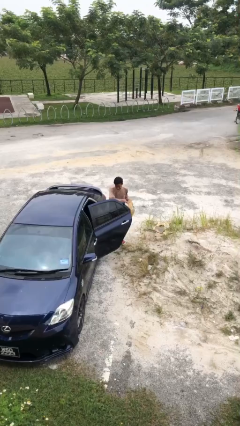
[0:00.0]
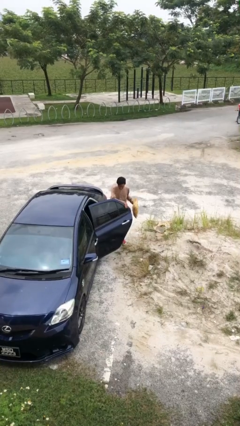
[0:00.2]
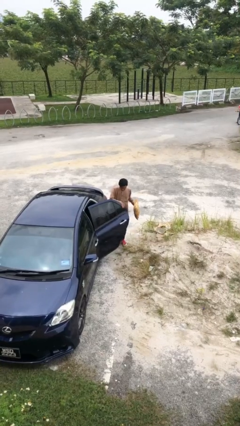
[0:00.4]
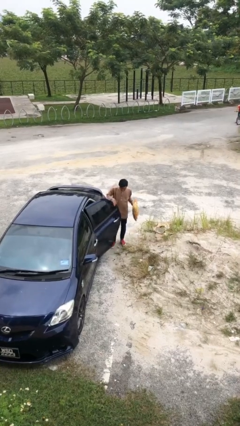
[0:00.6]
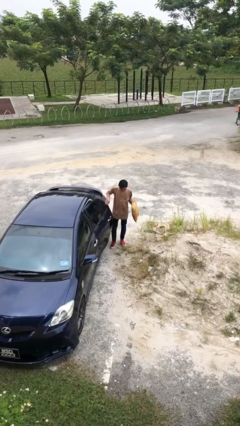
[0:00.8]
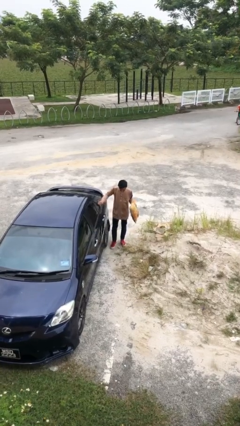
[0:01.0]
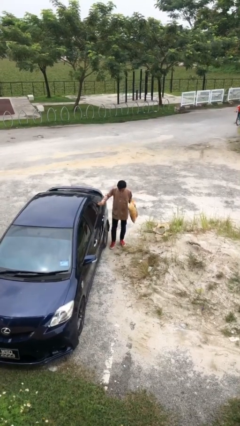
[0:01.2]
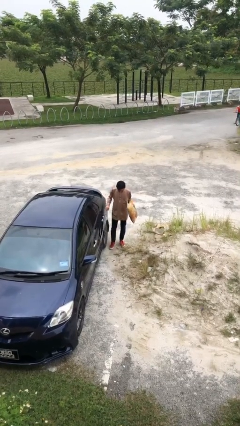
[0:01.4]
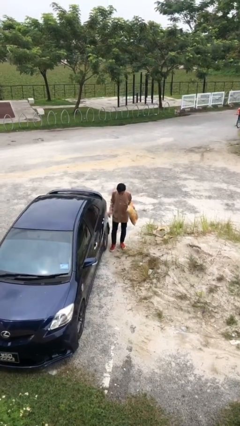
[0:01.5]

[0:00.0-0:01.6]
person closes car door

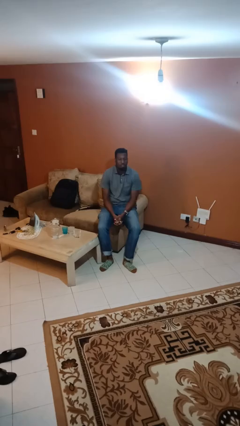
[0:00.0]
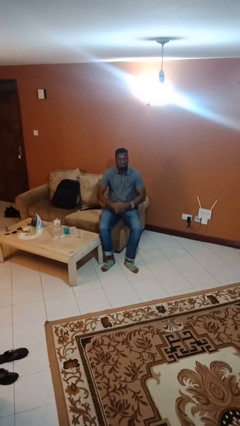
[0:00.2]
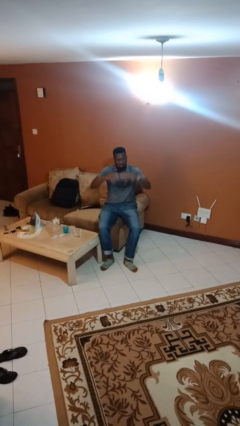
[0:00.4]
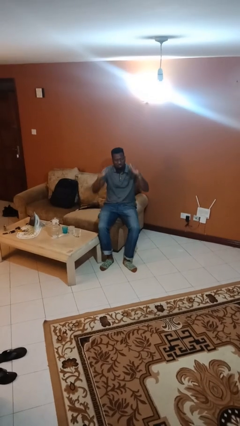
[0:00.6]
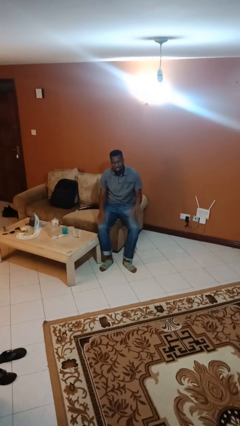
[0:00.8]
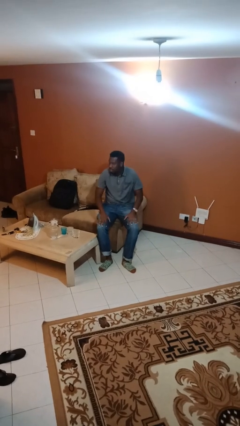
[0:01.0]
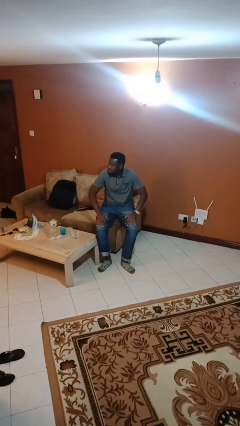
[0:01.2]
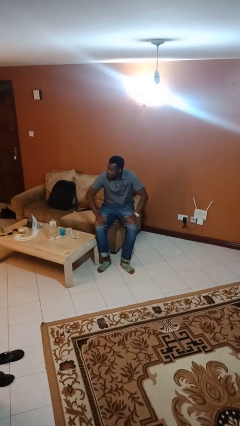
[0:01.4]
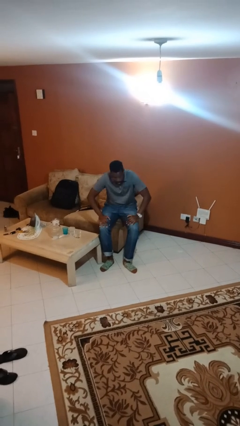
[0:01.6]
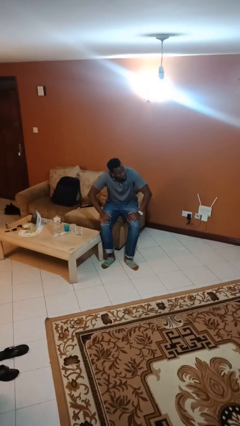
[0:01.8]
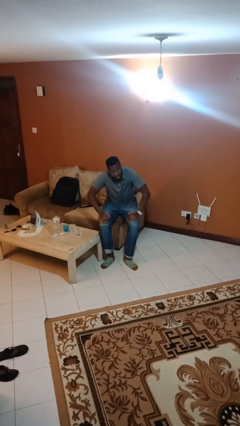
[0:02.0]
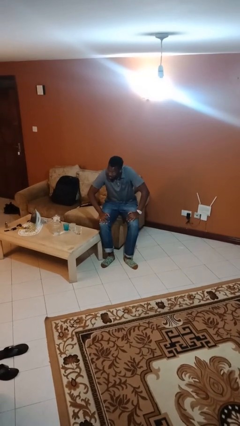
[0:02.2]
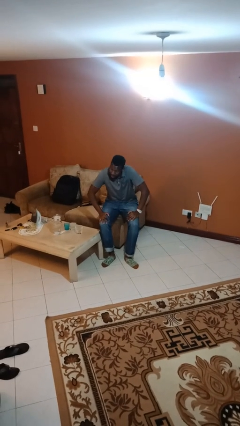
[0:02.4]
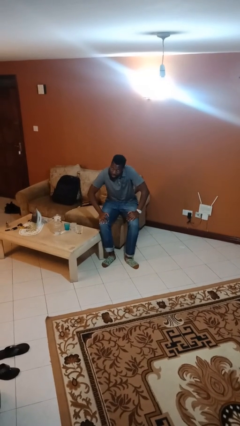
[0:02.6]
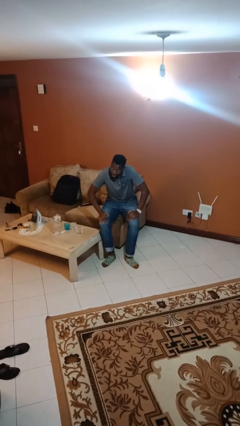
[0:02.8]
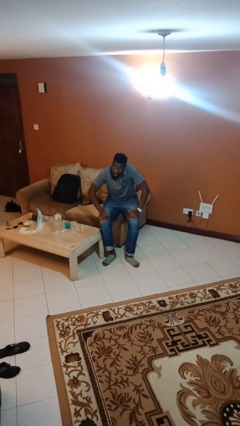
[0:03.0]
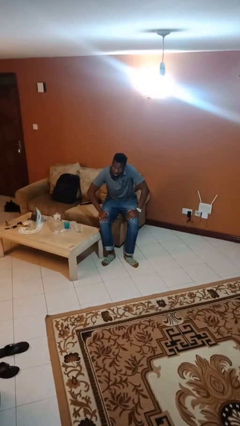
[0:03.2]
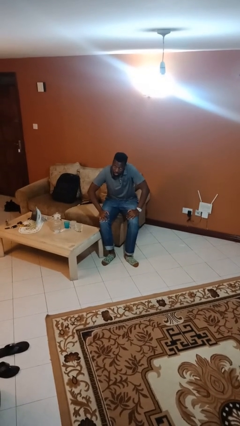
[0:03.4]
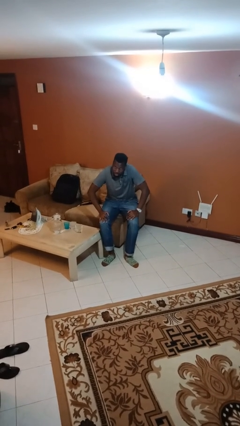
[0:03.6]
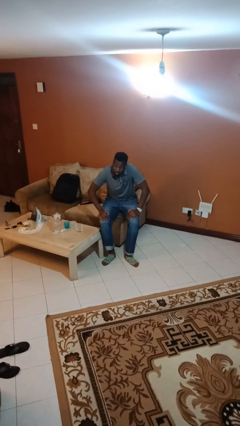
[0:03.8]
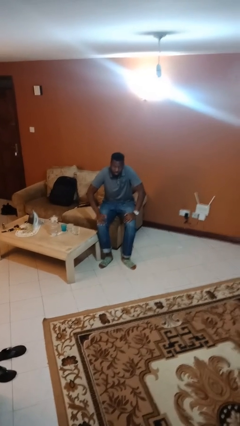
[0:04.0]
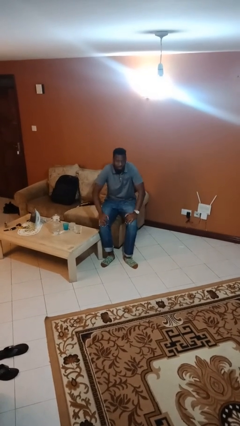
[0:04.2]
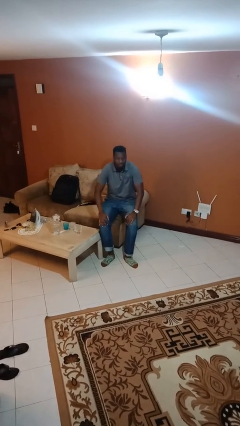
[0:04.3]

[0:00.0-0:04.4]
person slaps hands on thighs

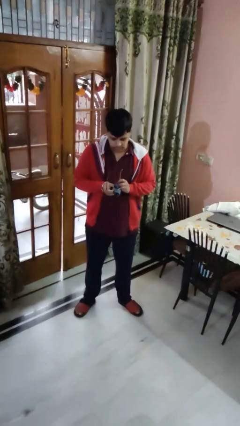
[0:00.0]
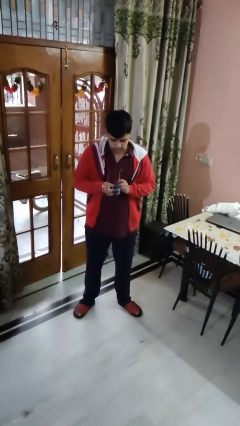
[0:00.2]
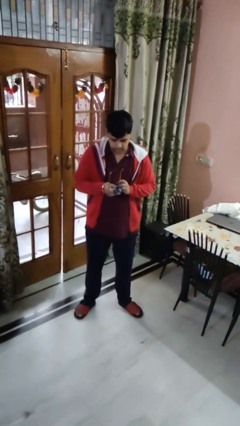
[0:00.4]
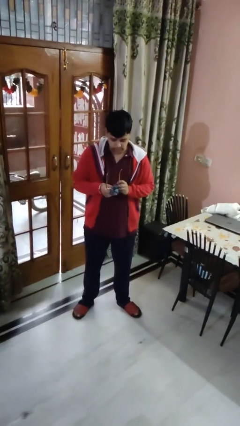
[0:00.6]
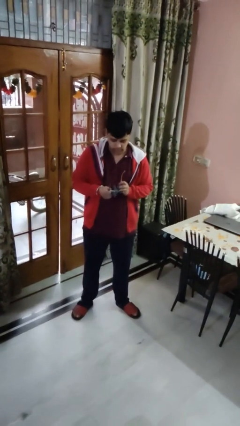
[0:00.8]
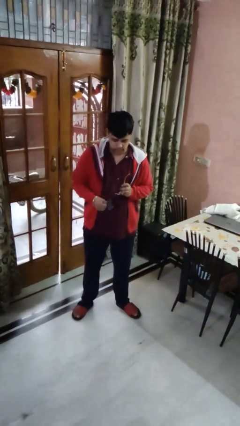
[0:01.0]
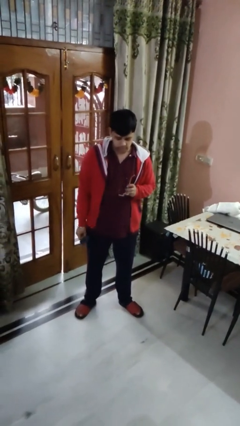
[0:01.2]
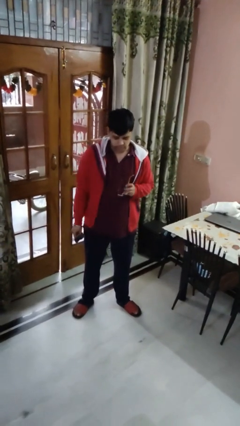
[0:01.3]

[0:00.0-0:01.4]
person cleans eyeglasses

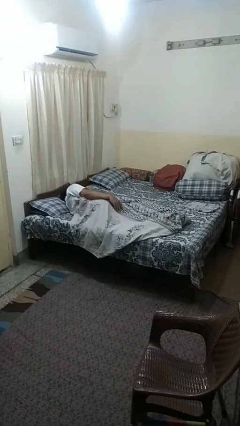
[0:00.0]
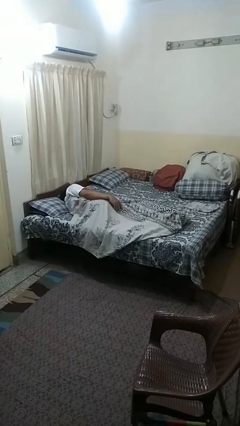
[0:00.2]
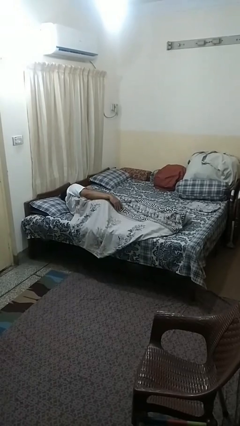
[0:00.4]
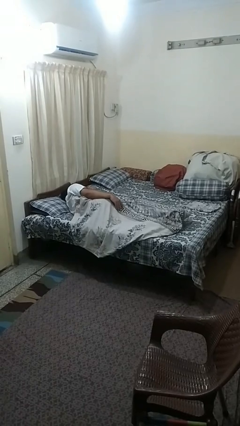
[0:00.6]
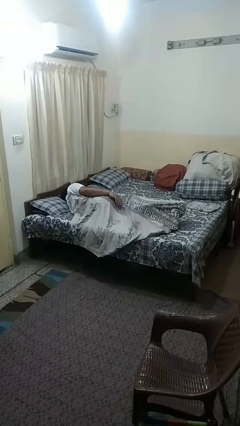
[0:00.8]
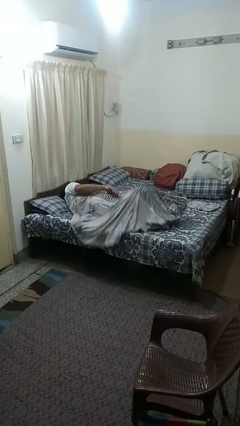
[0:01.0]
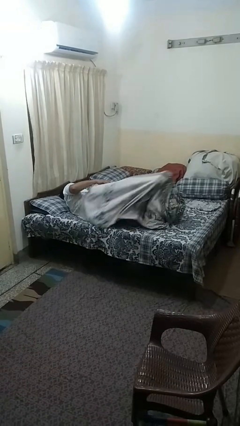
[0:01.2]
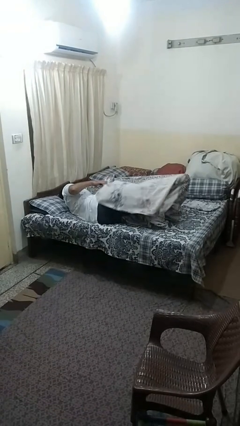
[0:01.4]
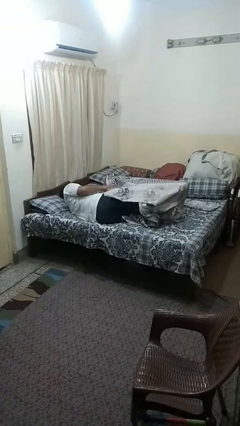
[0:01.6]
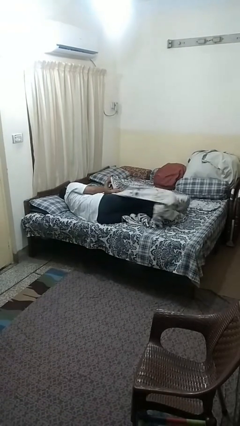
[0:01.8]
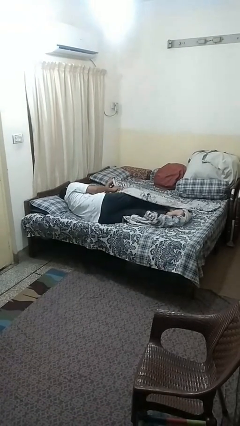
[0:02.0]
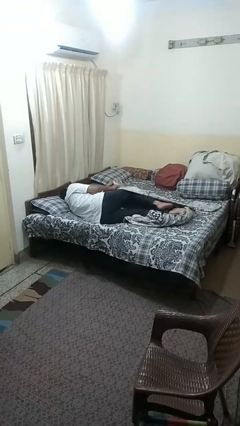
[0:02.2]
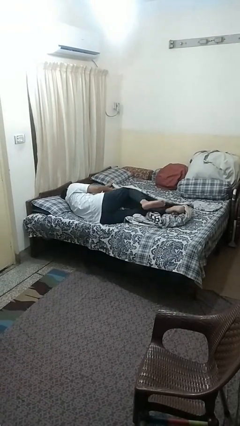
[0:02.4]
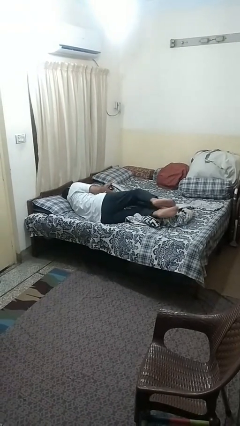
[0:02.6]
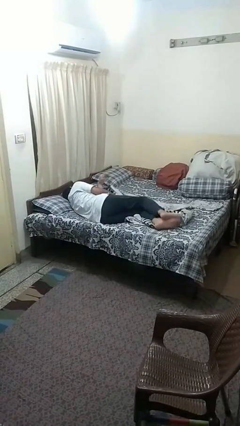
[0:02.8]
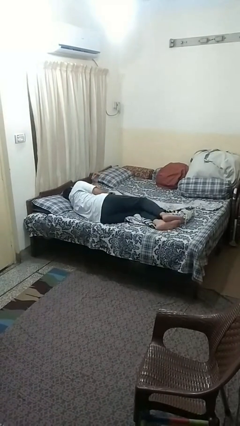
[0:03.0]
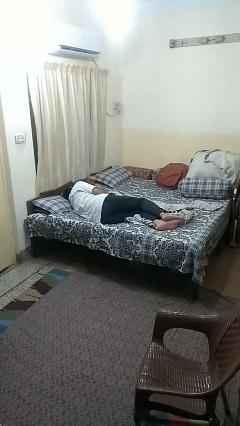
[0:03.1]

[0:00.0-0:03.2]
person uncovers with bedsheets

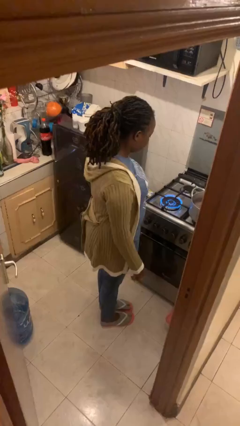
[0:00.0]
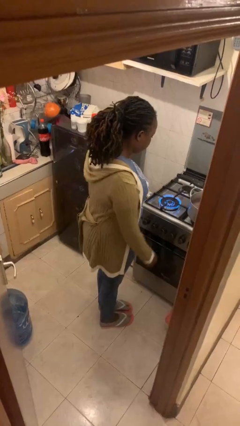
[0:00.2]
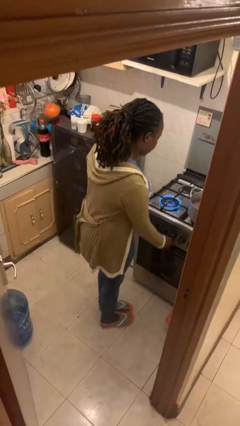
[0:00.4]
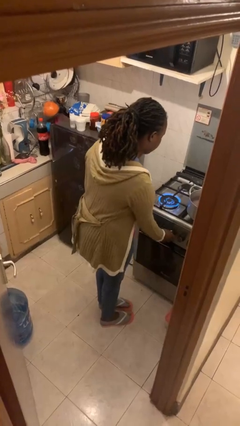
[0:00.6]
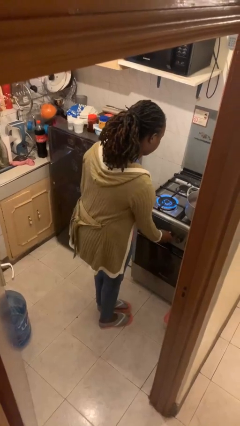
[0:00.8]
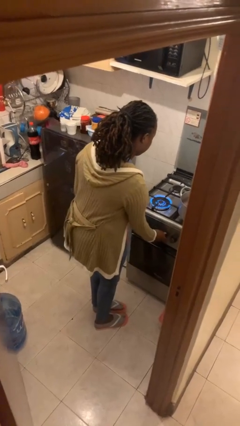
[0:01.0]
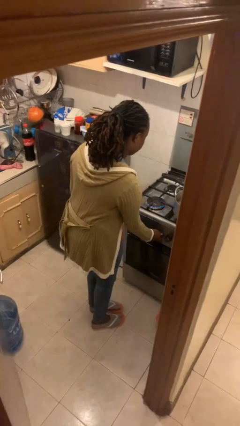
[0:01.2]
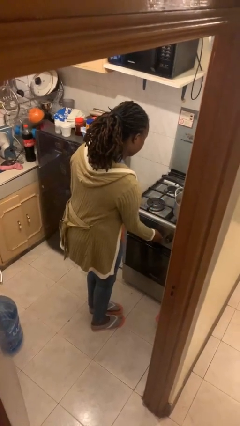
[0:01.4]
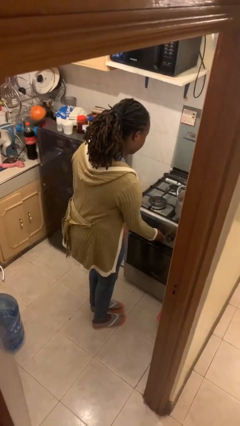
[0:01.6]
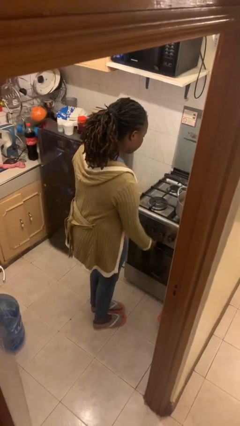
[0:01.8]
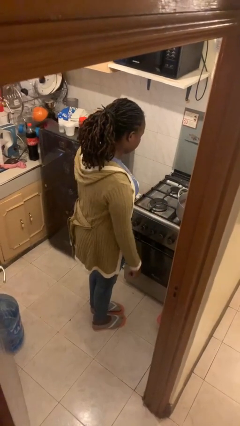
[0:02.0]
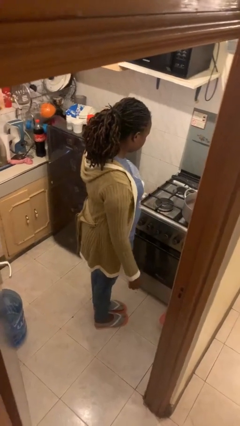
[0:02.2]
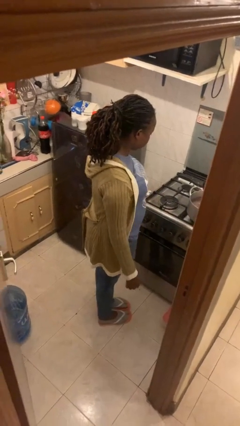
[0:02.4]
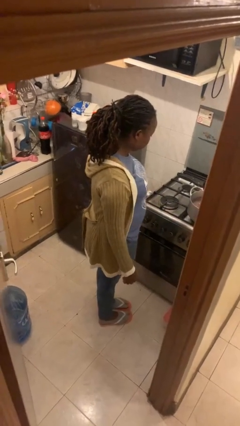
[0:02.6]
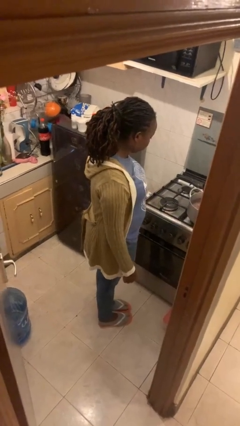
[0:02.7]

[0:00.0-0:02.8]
person turns off stovetop

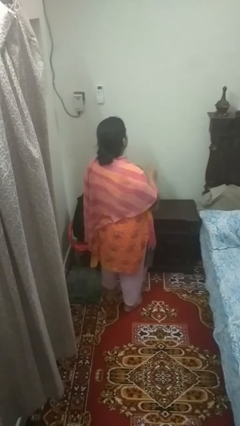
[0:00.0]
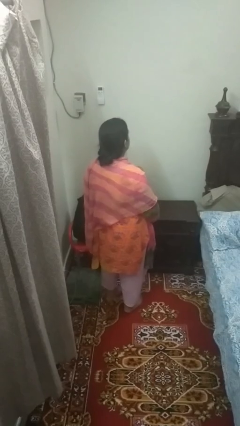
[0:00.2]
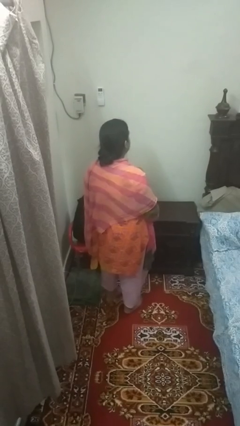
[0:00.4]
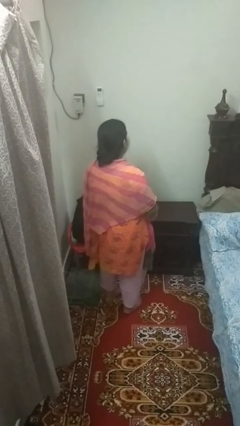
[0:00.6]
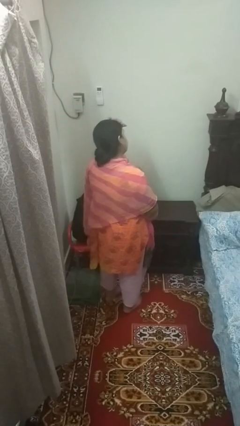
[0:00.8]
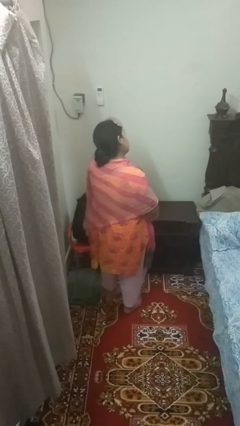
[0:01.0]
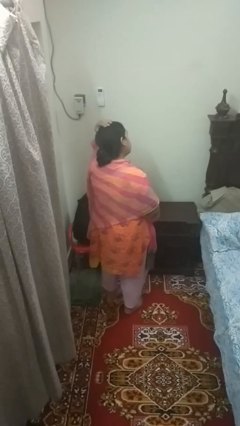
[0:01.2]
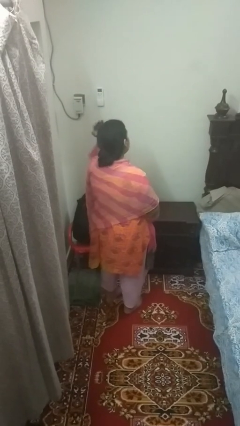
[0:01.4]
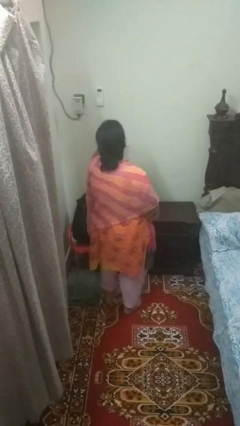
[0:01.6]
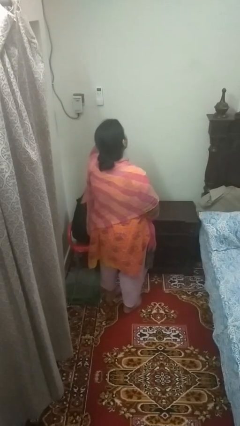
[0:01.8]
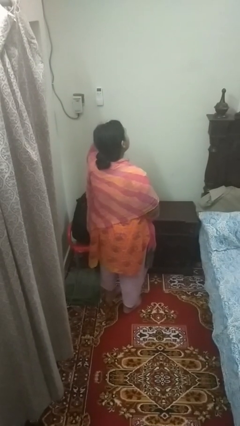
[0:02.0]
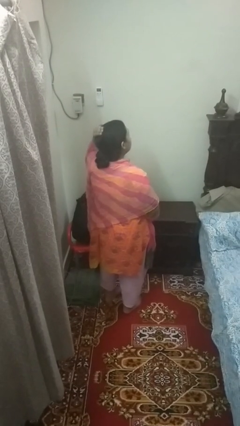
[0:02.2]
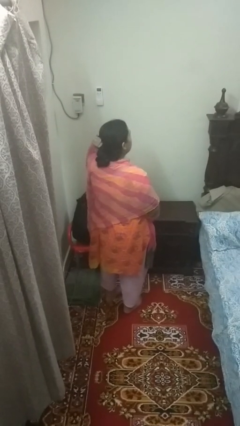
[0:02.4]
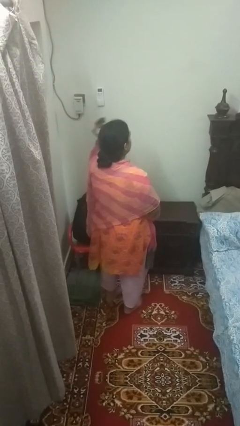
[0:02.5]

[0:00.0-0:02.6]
person strokes hair

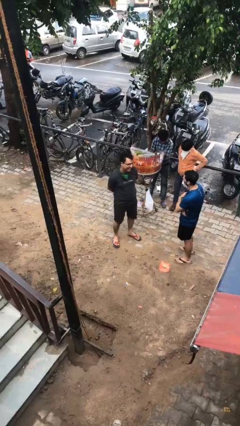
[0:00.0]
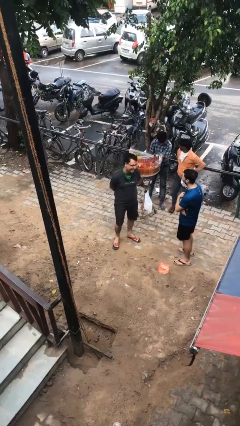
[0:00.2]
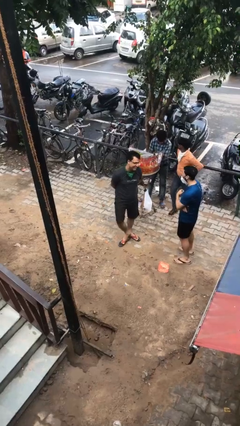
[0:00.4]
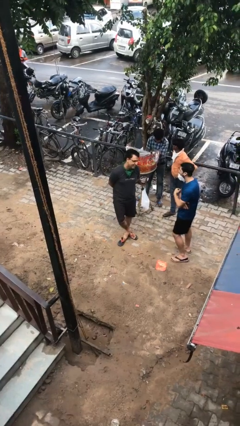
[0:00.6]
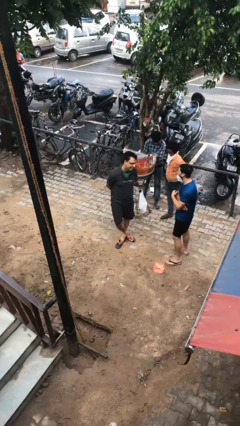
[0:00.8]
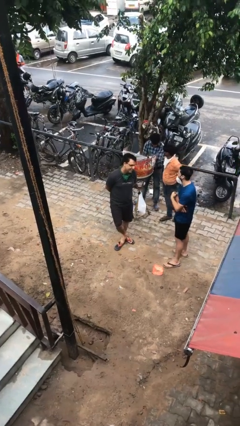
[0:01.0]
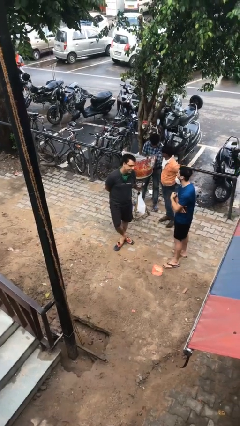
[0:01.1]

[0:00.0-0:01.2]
person laughs with person
